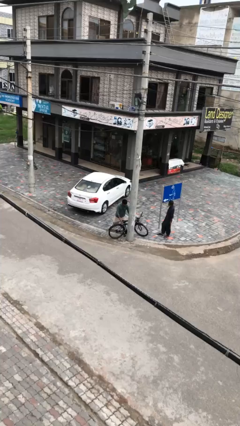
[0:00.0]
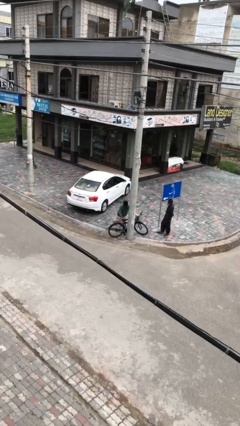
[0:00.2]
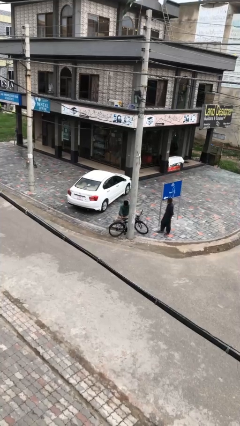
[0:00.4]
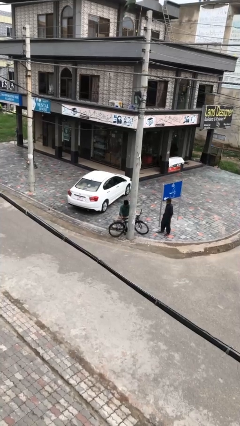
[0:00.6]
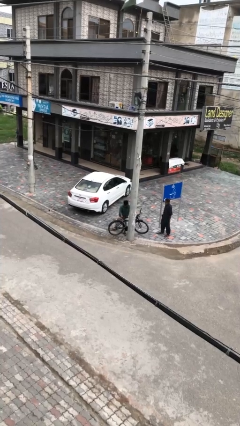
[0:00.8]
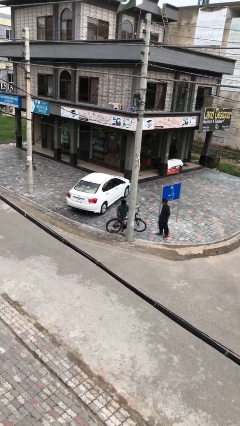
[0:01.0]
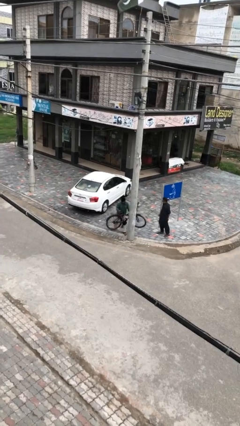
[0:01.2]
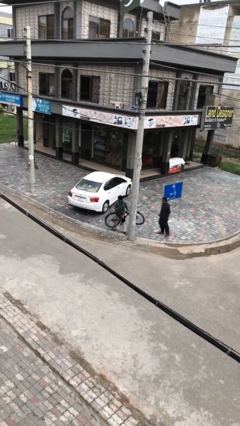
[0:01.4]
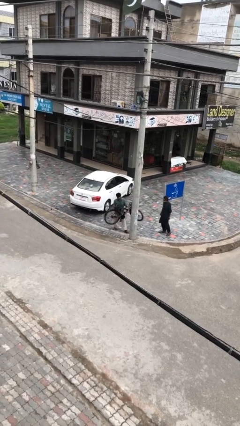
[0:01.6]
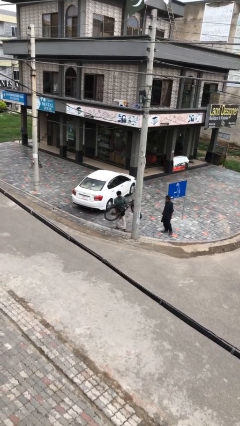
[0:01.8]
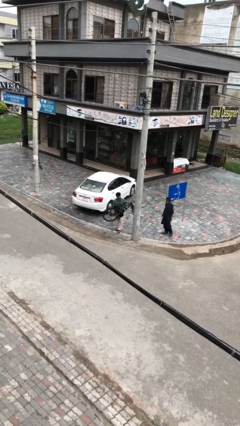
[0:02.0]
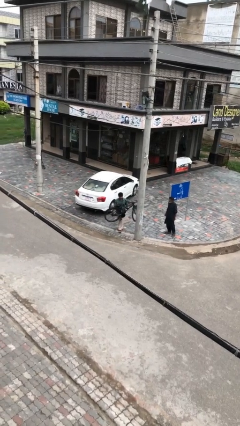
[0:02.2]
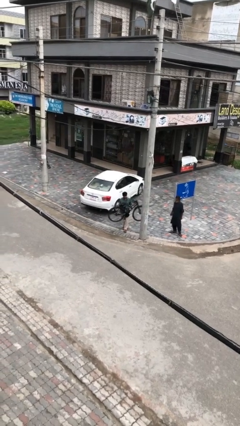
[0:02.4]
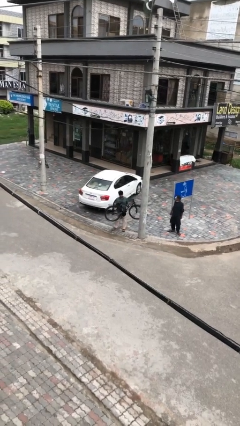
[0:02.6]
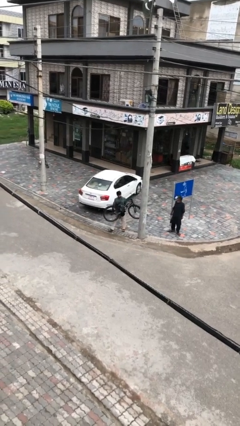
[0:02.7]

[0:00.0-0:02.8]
person picks up object from floor

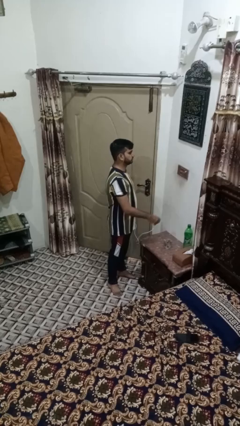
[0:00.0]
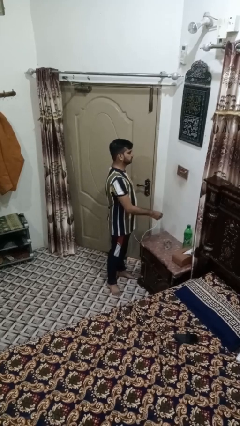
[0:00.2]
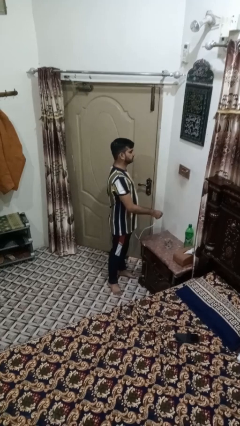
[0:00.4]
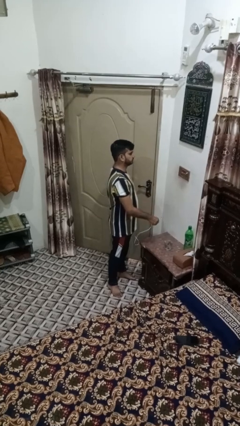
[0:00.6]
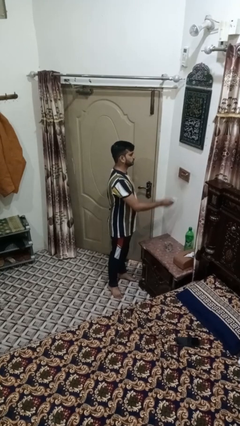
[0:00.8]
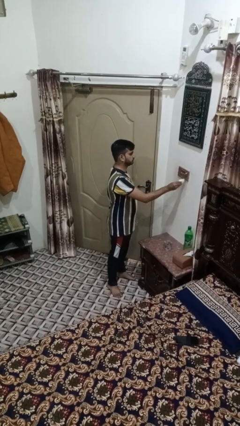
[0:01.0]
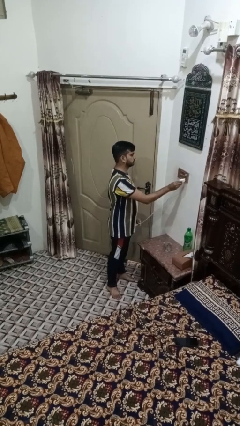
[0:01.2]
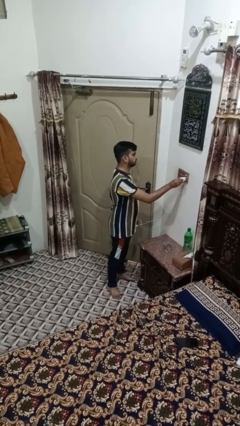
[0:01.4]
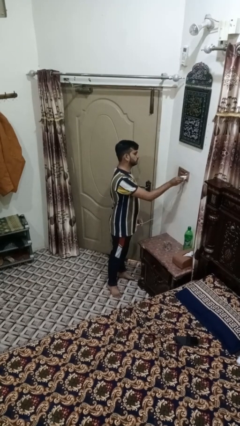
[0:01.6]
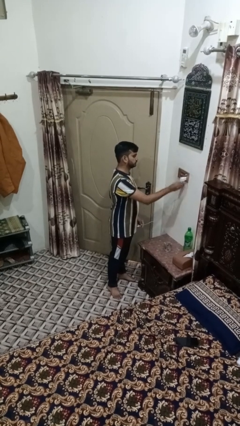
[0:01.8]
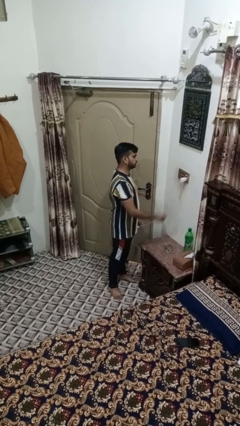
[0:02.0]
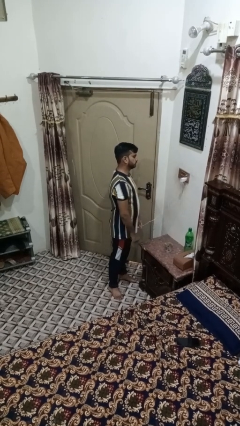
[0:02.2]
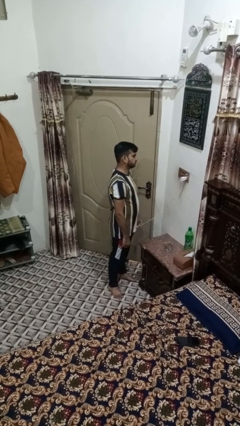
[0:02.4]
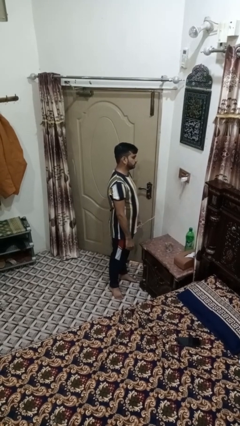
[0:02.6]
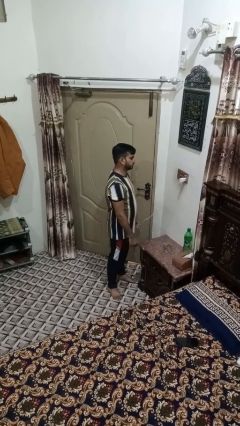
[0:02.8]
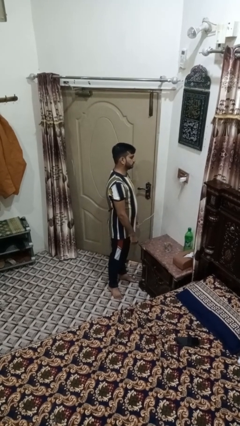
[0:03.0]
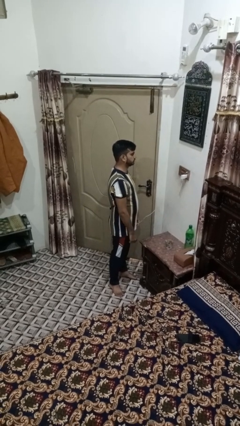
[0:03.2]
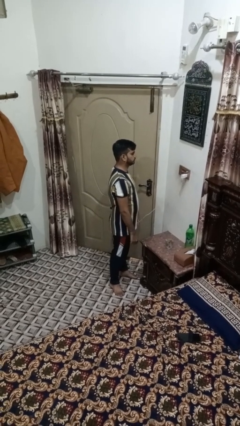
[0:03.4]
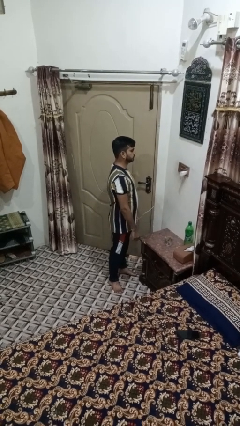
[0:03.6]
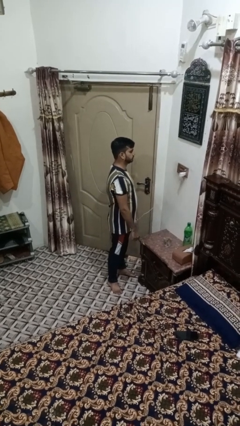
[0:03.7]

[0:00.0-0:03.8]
person plugs into electrical socket

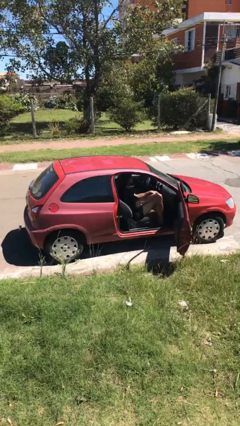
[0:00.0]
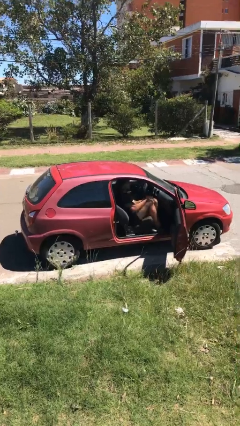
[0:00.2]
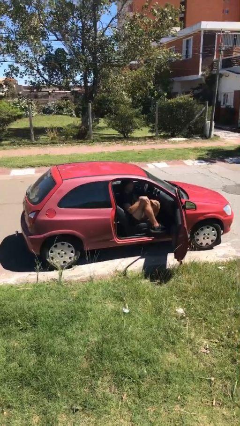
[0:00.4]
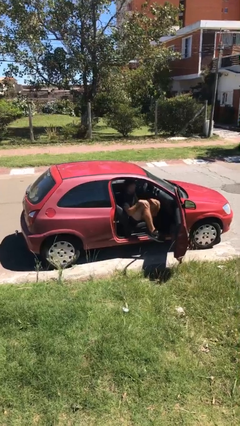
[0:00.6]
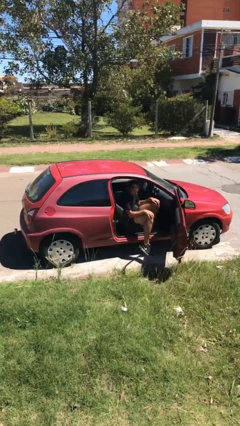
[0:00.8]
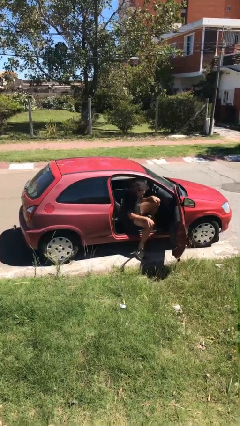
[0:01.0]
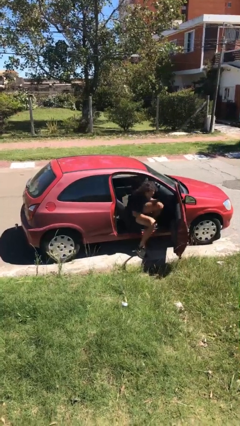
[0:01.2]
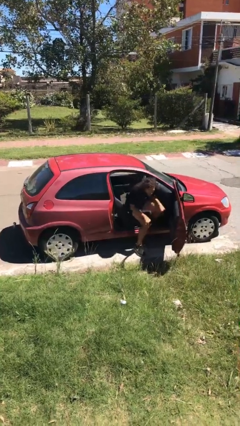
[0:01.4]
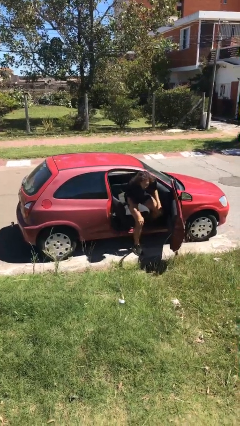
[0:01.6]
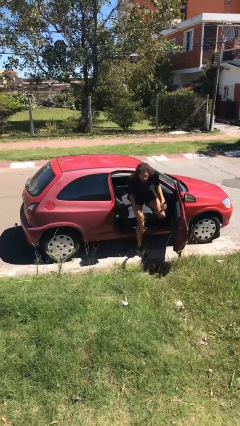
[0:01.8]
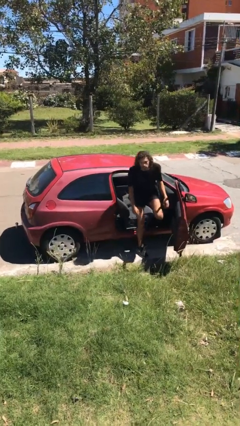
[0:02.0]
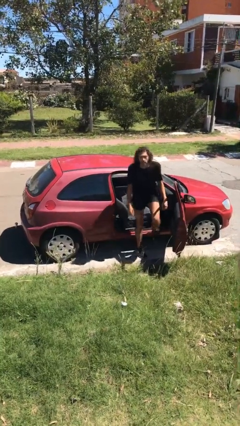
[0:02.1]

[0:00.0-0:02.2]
person exits car

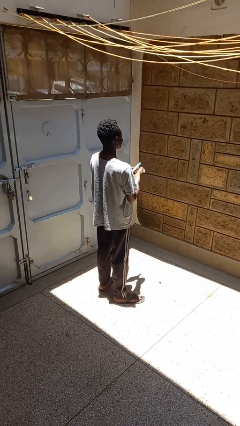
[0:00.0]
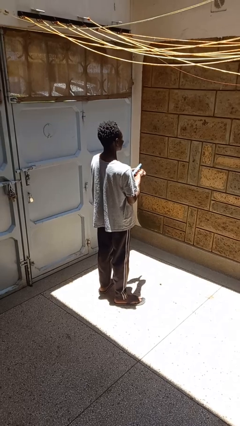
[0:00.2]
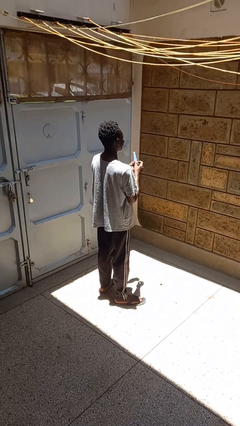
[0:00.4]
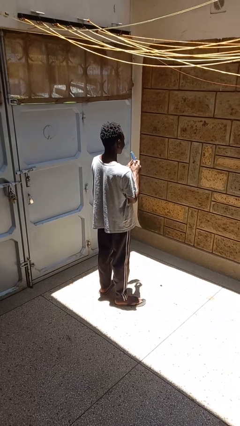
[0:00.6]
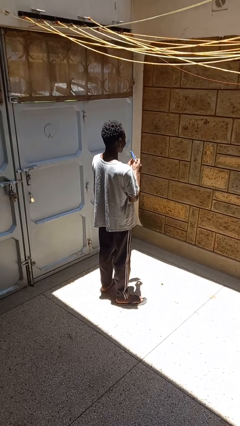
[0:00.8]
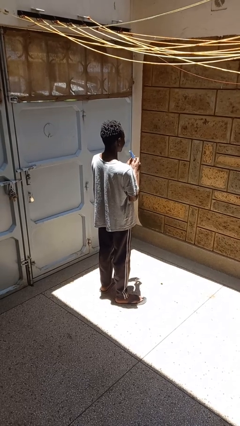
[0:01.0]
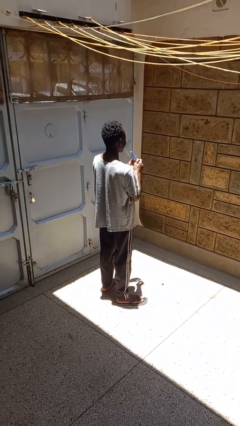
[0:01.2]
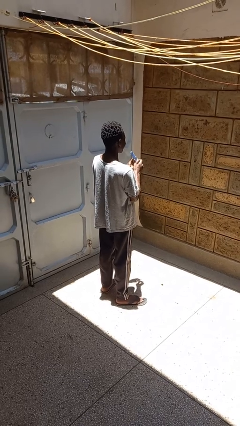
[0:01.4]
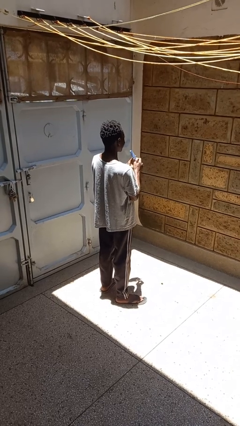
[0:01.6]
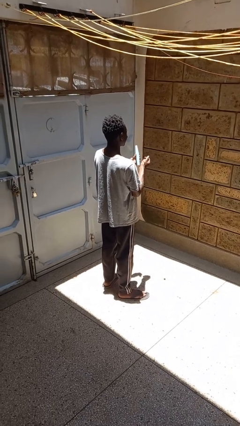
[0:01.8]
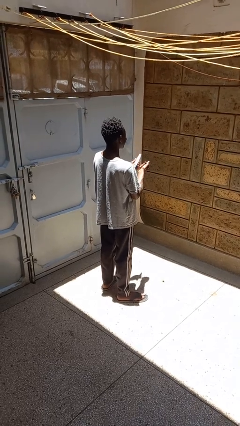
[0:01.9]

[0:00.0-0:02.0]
person files fingernails

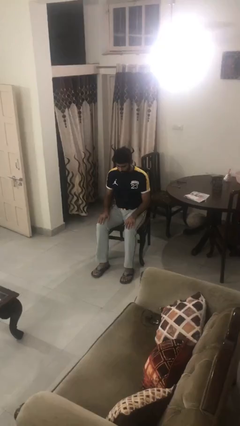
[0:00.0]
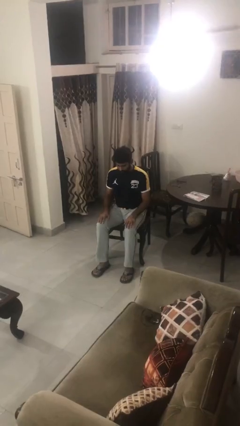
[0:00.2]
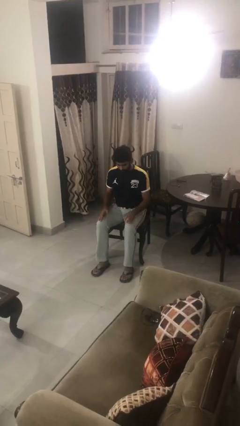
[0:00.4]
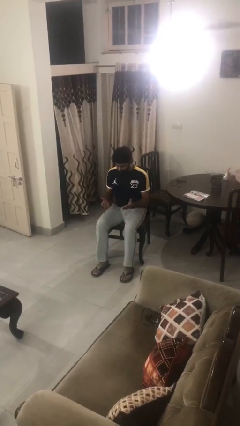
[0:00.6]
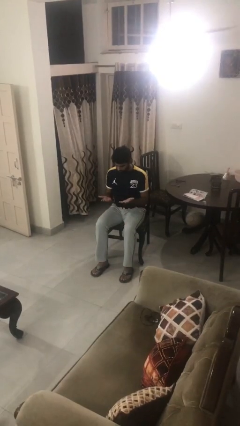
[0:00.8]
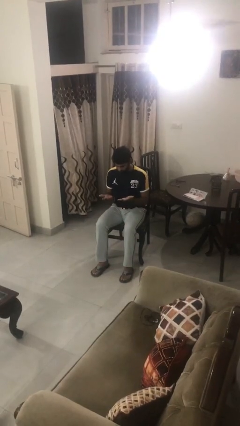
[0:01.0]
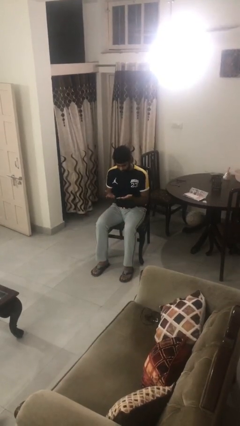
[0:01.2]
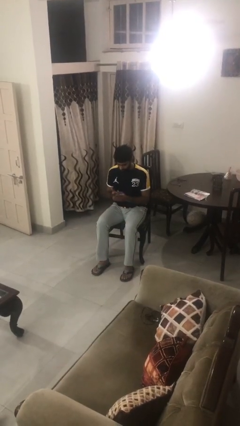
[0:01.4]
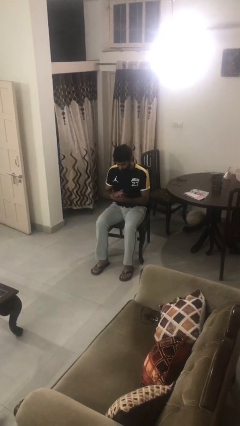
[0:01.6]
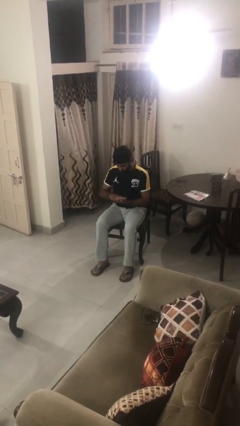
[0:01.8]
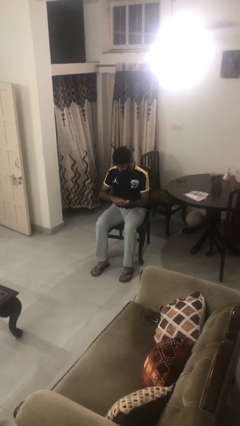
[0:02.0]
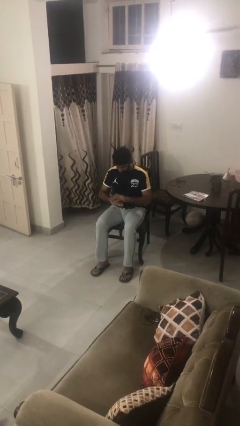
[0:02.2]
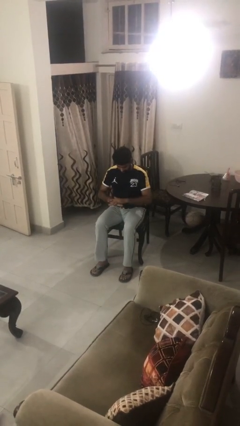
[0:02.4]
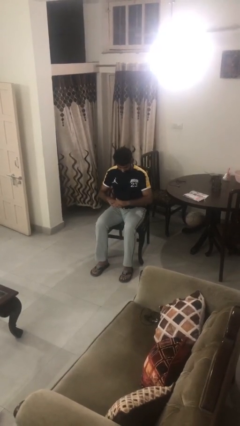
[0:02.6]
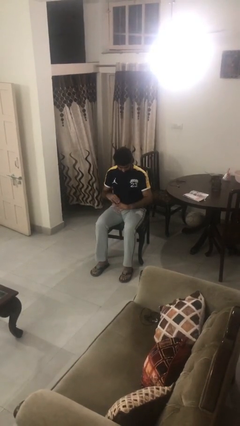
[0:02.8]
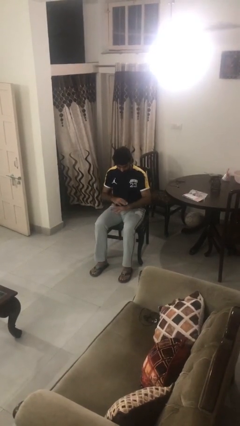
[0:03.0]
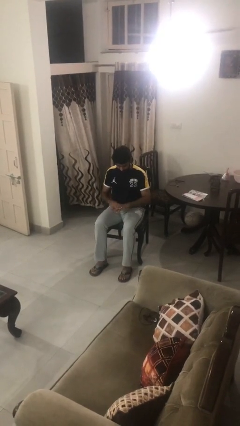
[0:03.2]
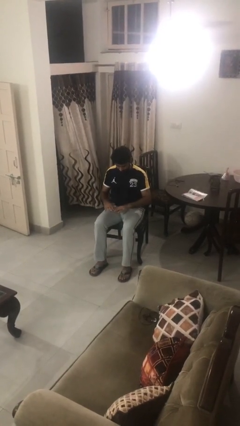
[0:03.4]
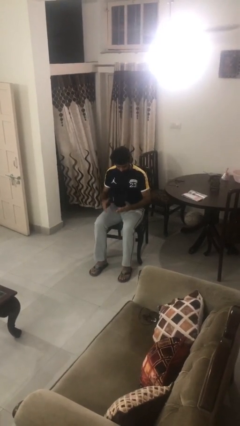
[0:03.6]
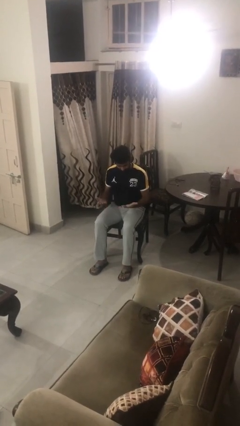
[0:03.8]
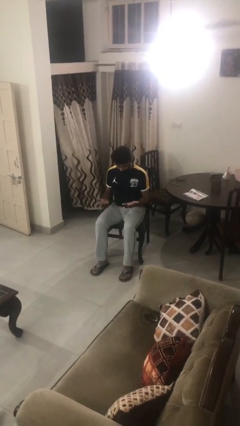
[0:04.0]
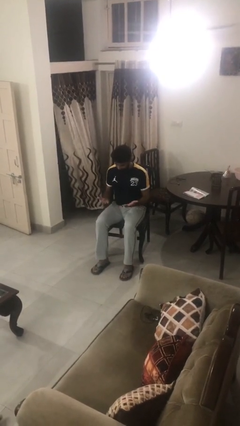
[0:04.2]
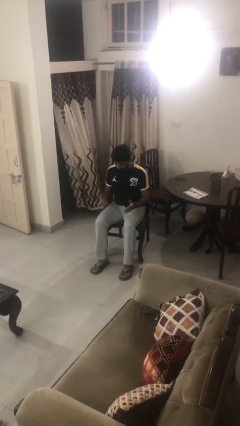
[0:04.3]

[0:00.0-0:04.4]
person looks at hands in lap

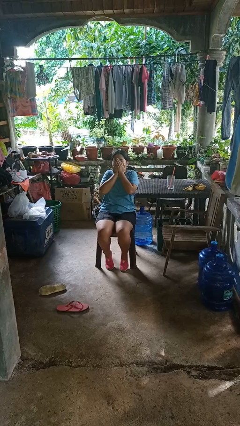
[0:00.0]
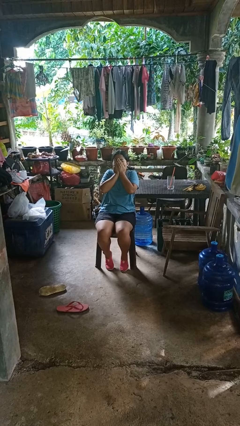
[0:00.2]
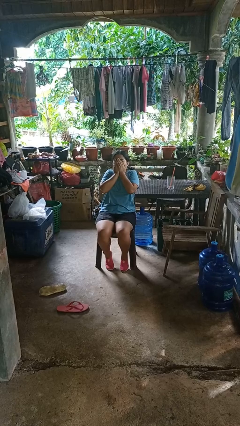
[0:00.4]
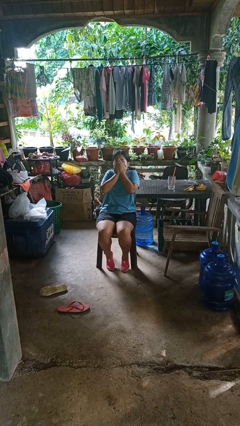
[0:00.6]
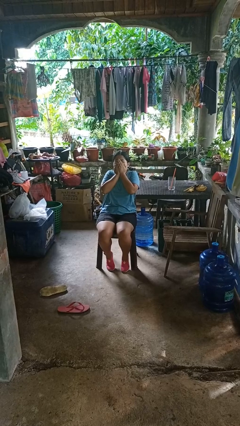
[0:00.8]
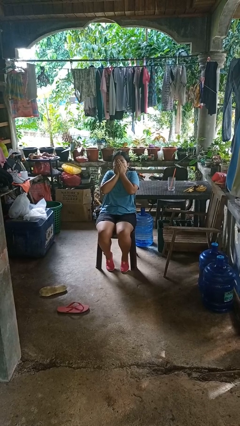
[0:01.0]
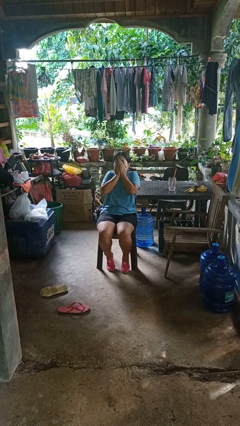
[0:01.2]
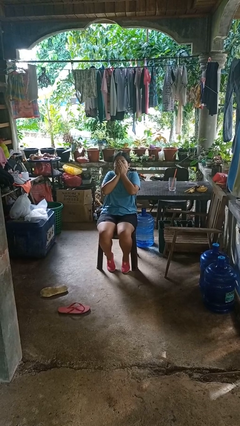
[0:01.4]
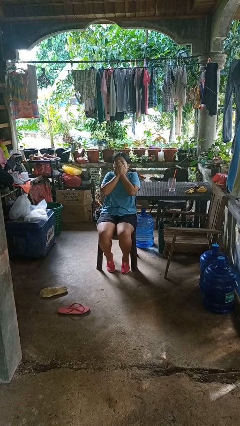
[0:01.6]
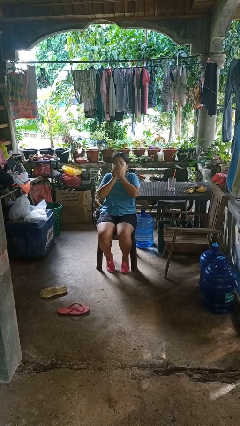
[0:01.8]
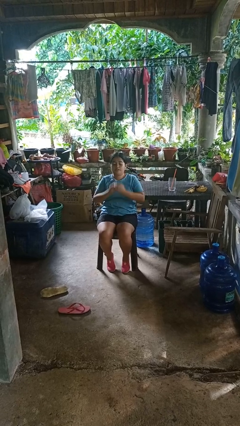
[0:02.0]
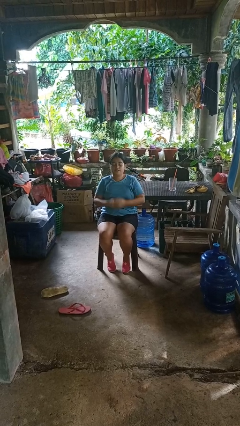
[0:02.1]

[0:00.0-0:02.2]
person covers face with hands
